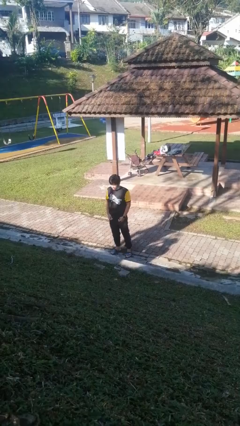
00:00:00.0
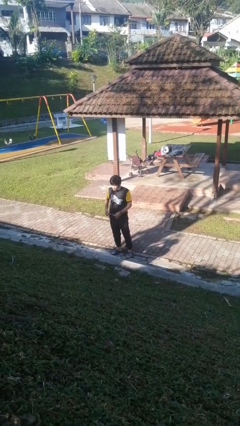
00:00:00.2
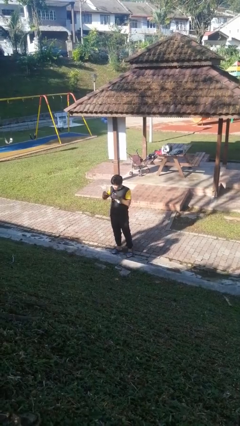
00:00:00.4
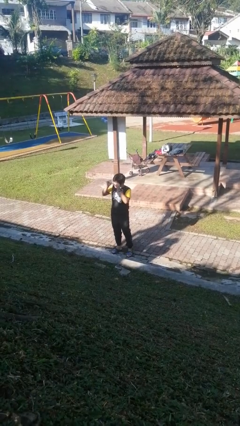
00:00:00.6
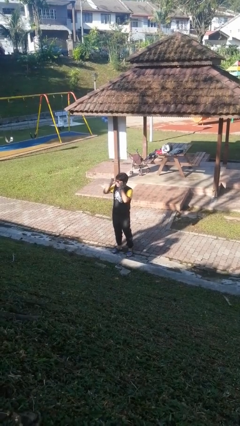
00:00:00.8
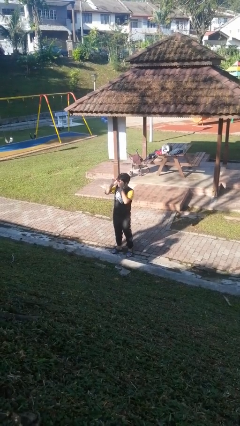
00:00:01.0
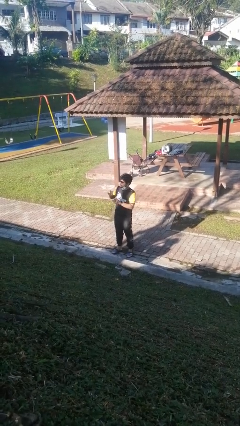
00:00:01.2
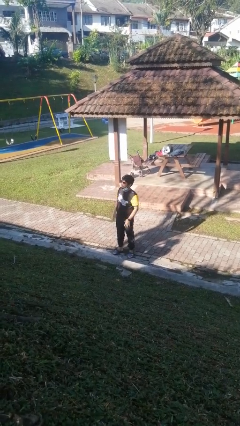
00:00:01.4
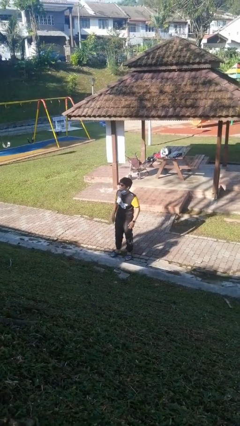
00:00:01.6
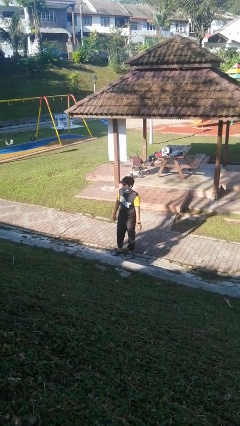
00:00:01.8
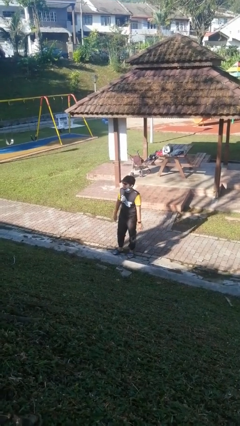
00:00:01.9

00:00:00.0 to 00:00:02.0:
person puts on sunglasses

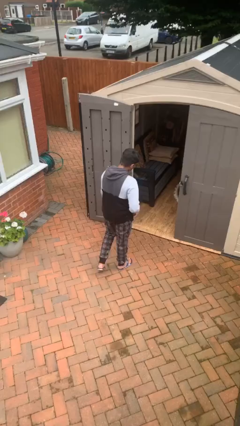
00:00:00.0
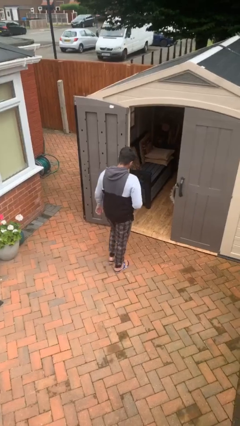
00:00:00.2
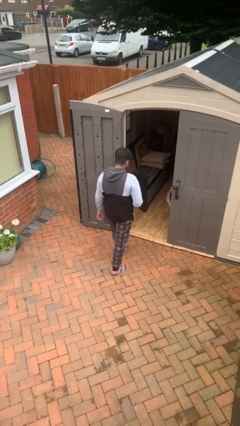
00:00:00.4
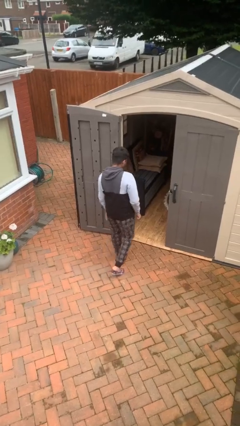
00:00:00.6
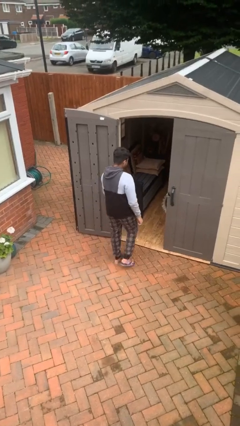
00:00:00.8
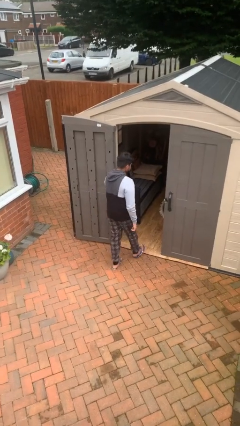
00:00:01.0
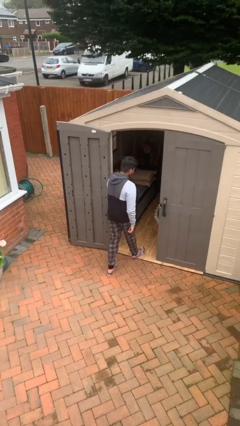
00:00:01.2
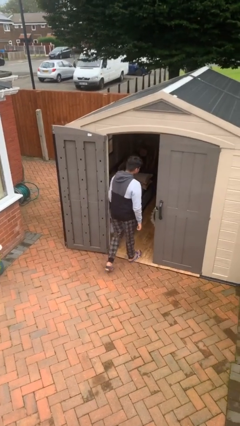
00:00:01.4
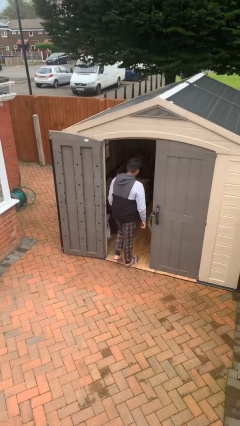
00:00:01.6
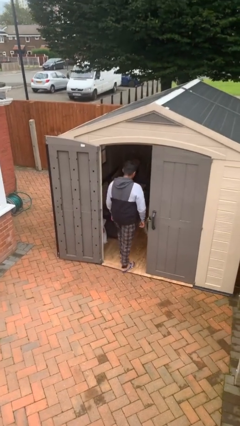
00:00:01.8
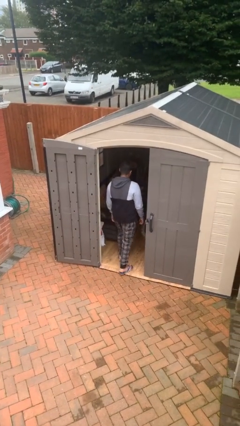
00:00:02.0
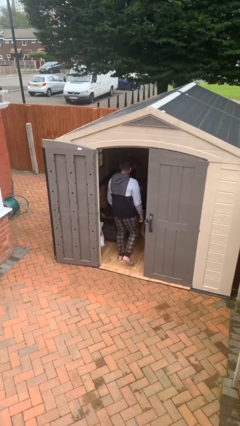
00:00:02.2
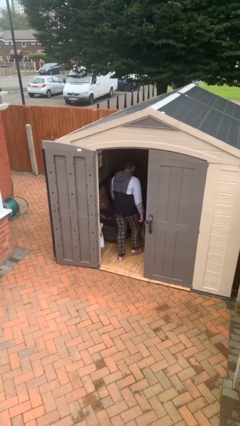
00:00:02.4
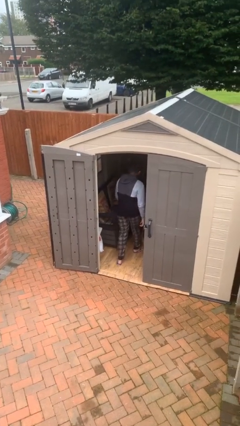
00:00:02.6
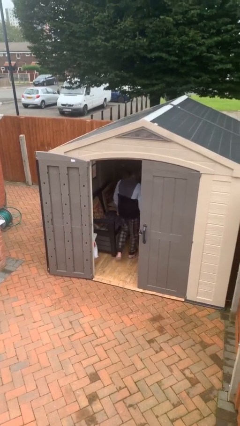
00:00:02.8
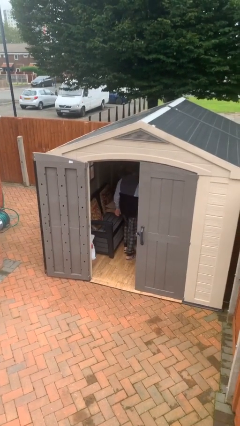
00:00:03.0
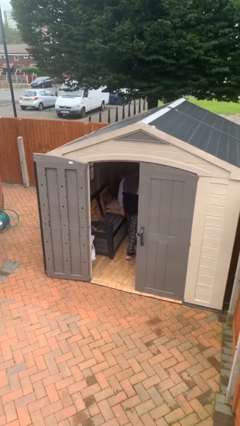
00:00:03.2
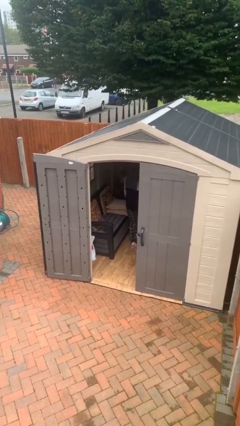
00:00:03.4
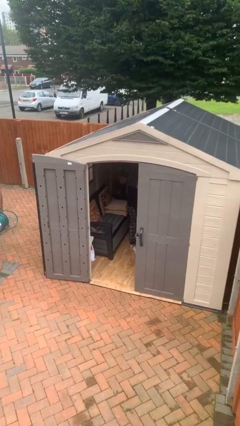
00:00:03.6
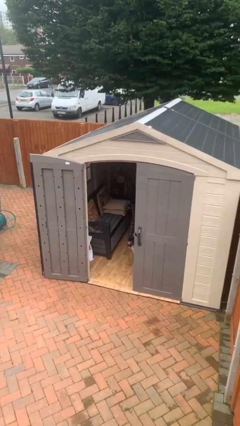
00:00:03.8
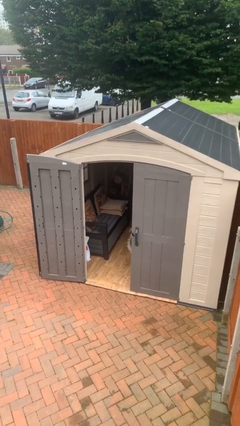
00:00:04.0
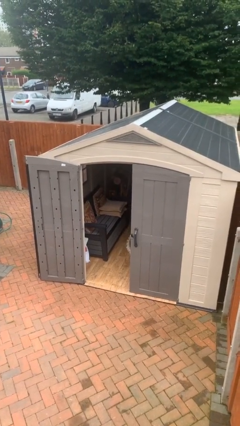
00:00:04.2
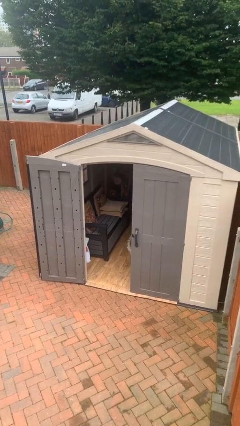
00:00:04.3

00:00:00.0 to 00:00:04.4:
person exits scene through structure

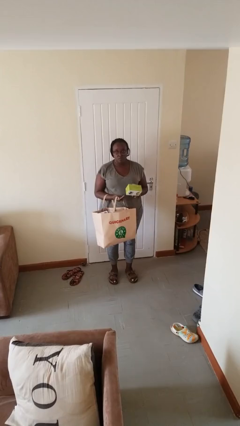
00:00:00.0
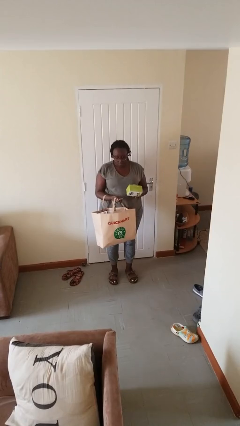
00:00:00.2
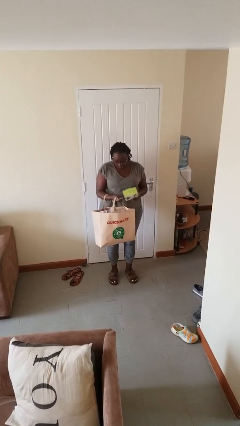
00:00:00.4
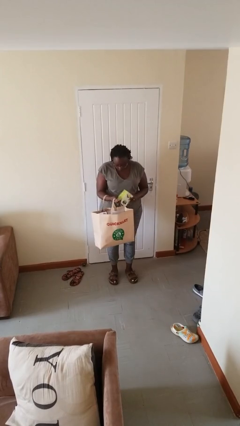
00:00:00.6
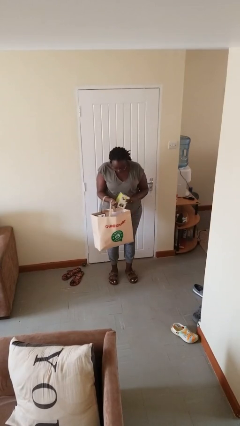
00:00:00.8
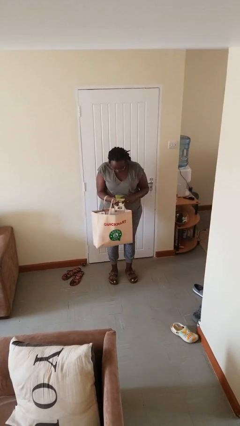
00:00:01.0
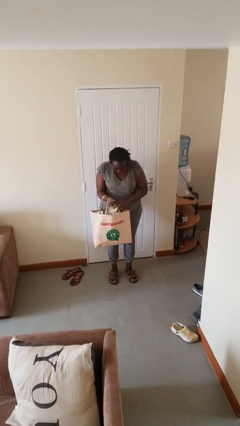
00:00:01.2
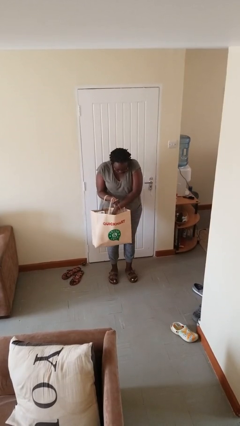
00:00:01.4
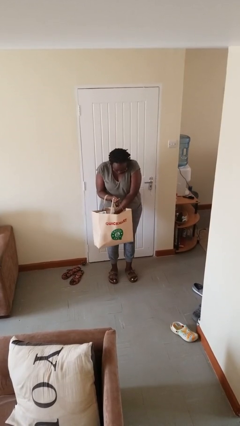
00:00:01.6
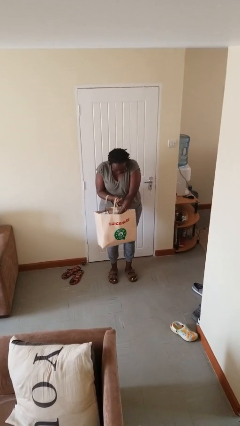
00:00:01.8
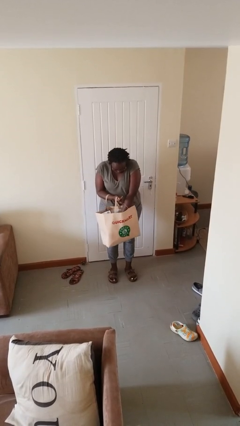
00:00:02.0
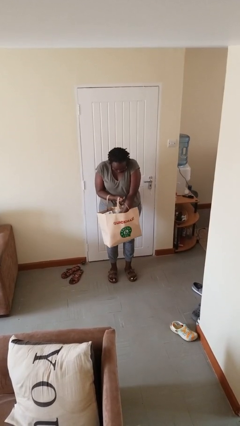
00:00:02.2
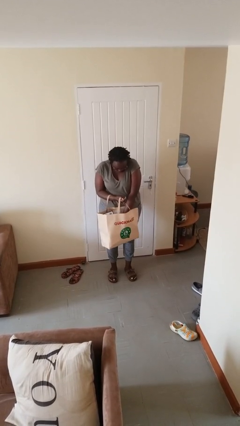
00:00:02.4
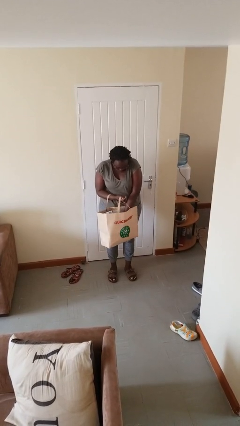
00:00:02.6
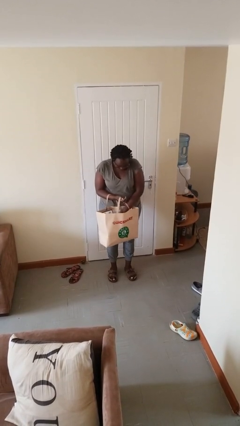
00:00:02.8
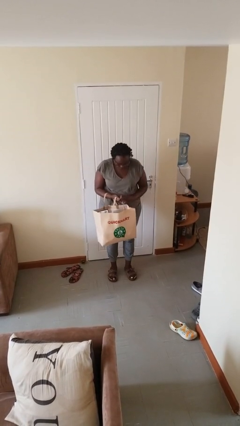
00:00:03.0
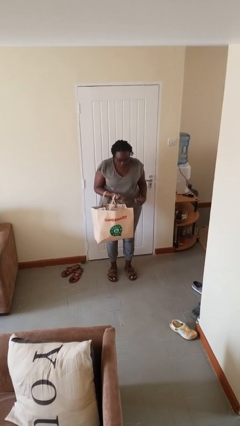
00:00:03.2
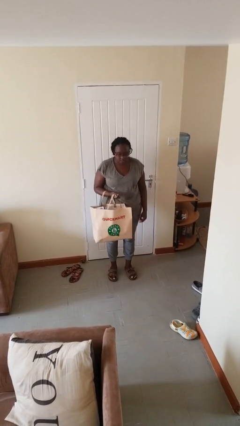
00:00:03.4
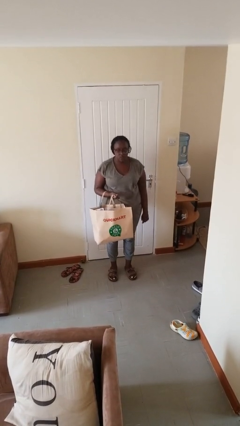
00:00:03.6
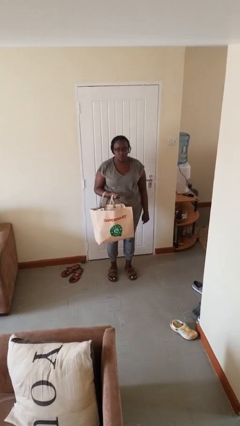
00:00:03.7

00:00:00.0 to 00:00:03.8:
person puts object into bag

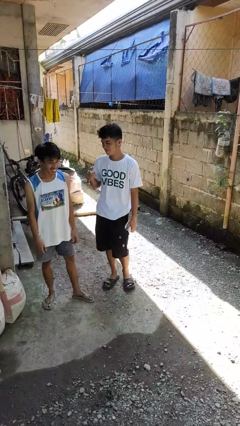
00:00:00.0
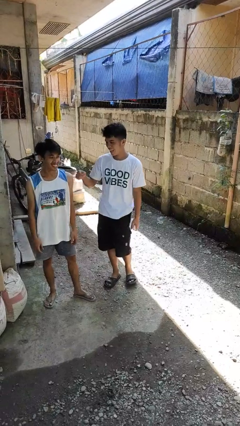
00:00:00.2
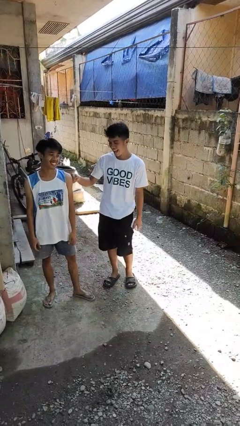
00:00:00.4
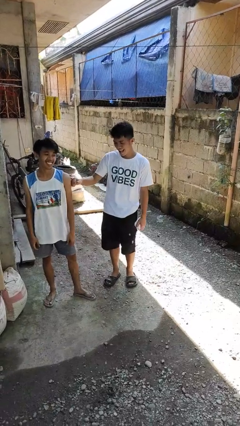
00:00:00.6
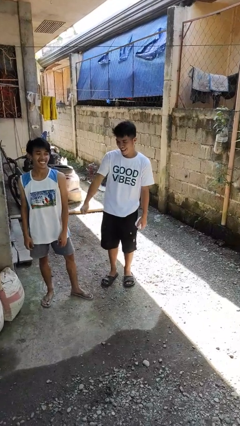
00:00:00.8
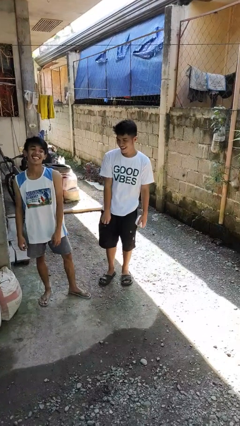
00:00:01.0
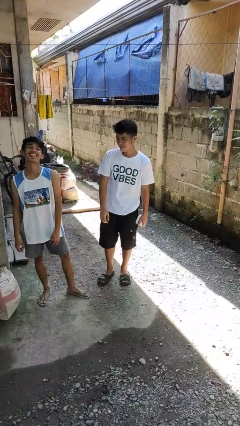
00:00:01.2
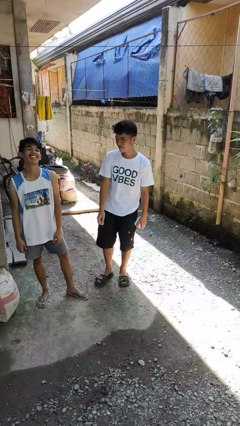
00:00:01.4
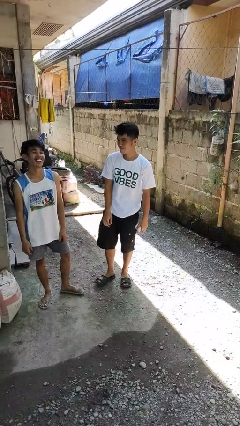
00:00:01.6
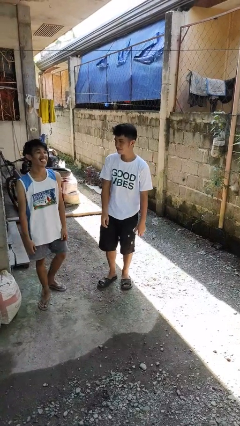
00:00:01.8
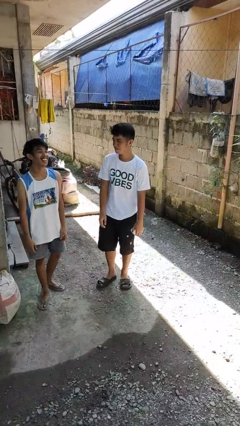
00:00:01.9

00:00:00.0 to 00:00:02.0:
person pounds shoulders of person

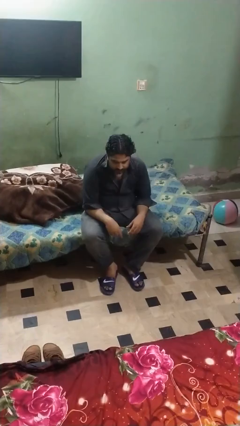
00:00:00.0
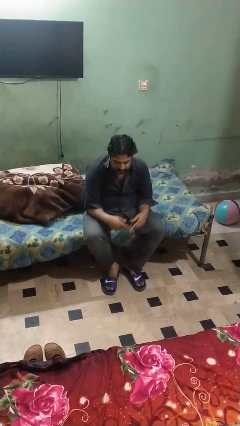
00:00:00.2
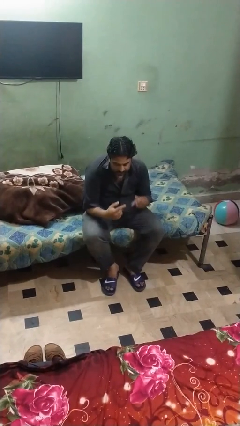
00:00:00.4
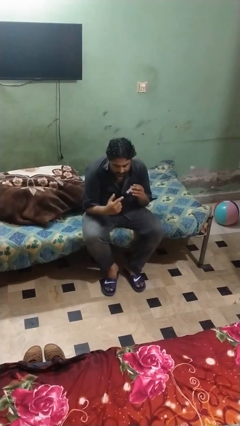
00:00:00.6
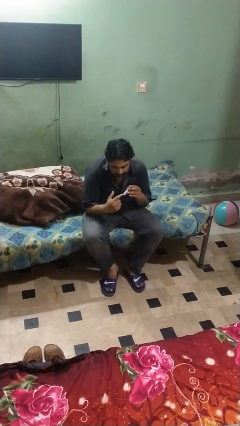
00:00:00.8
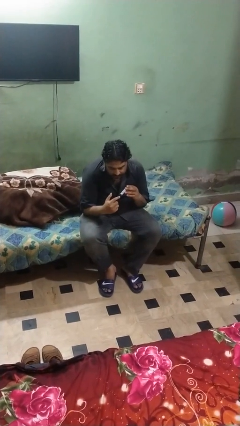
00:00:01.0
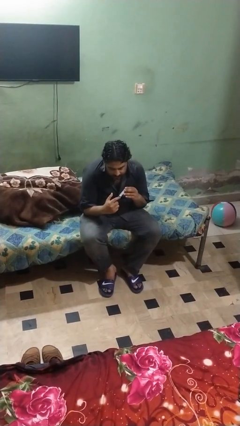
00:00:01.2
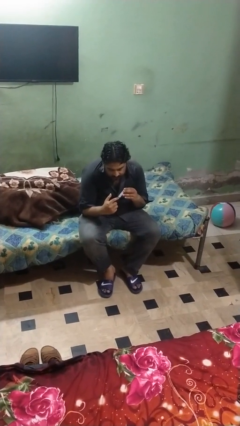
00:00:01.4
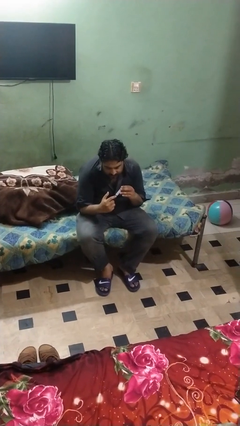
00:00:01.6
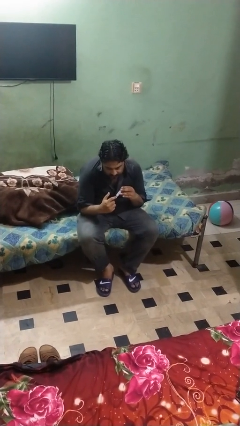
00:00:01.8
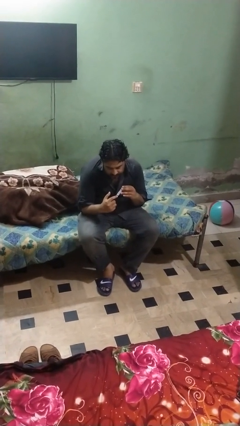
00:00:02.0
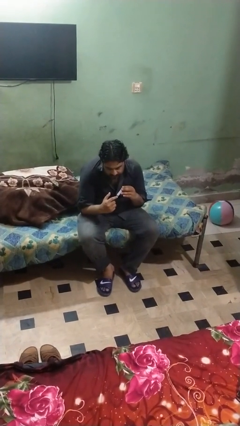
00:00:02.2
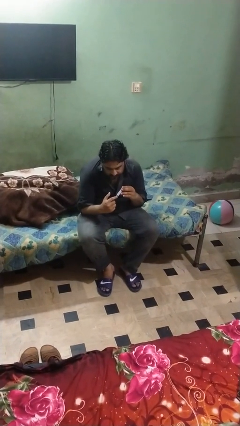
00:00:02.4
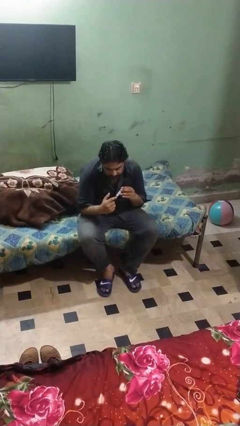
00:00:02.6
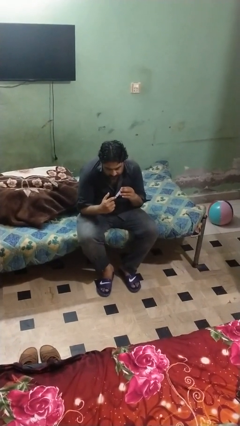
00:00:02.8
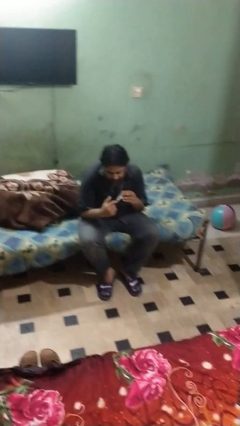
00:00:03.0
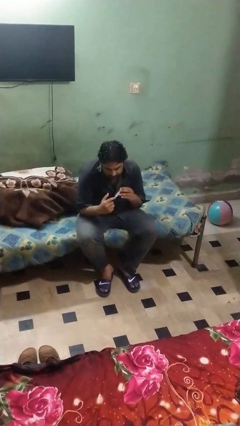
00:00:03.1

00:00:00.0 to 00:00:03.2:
person clips fingernails

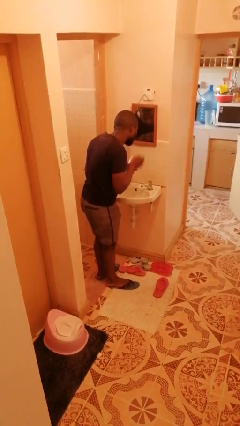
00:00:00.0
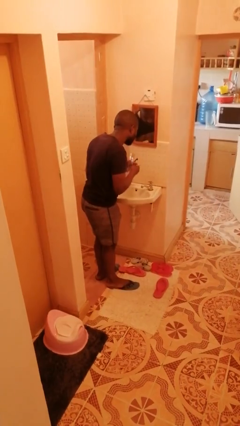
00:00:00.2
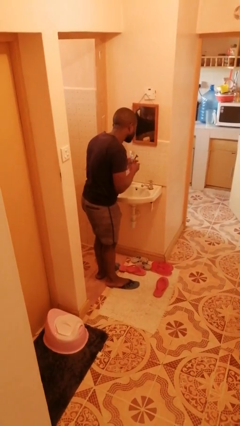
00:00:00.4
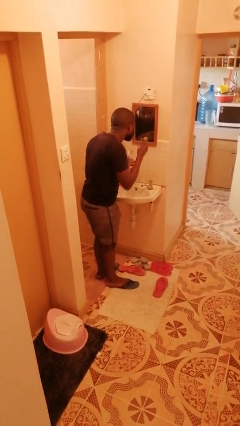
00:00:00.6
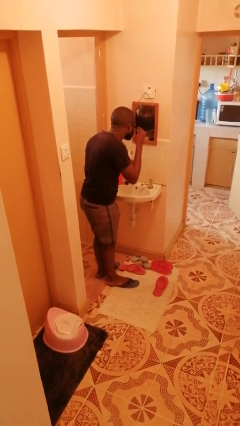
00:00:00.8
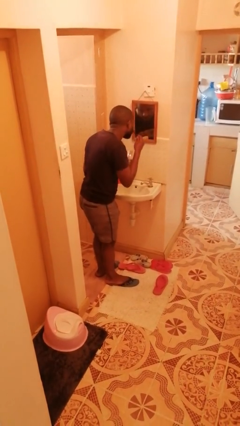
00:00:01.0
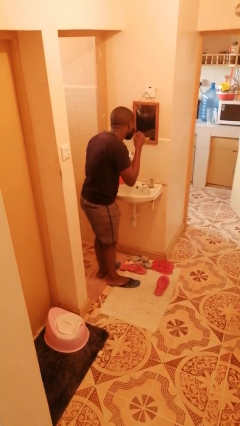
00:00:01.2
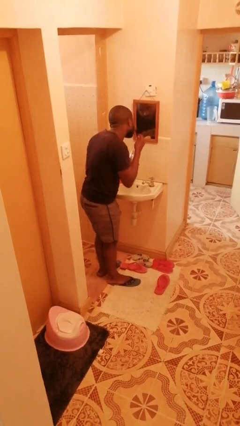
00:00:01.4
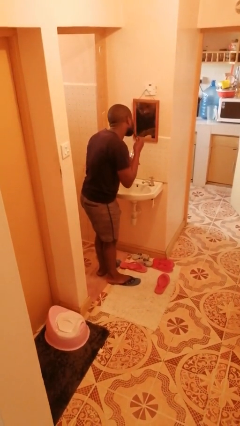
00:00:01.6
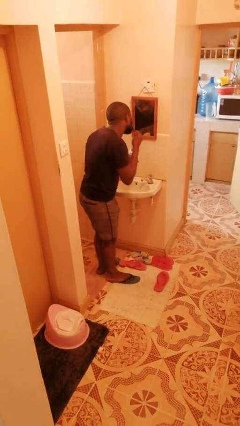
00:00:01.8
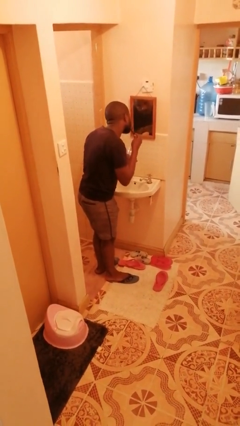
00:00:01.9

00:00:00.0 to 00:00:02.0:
person shaves face
